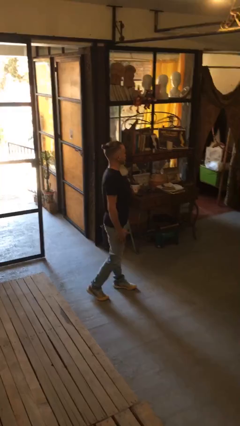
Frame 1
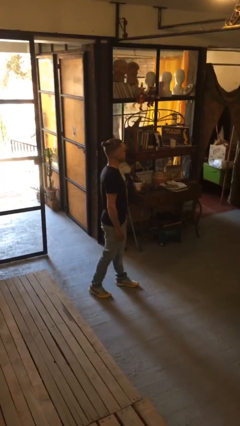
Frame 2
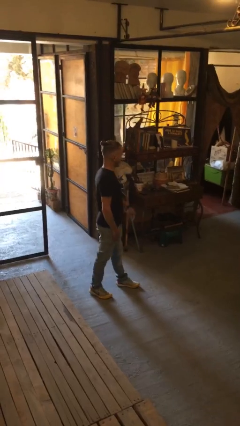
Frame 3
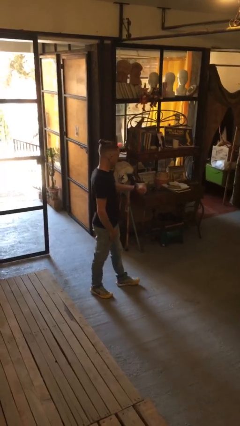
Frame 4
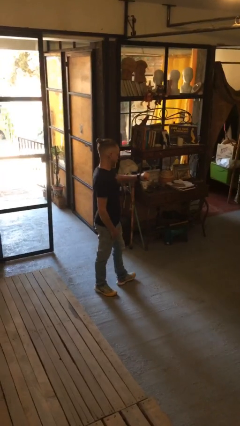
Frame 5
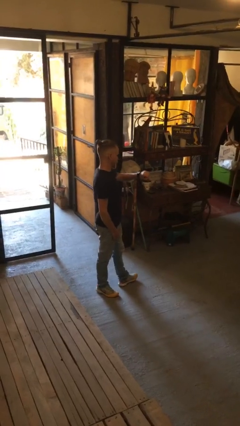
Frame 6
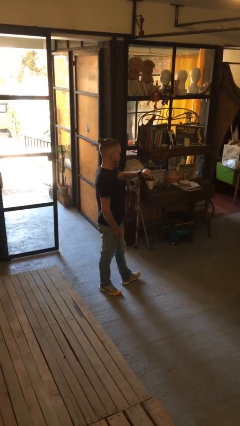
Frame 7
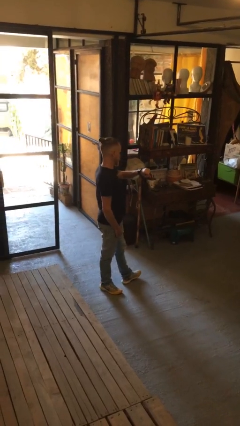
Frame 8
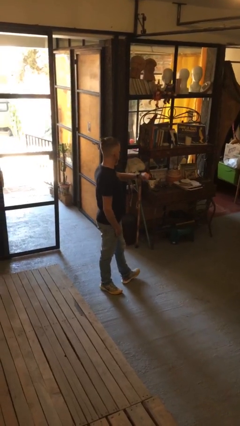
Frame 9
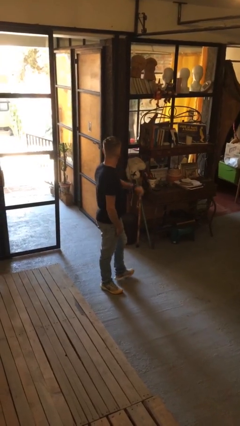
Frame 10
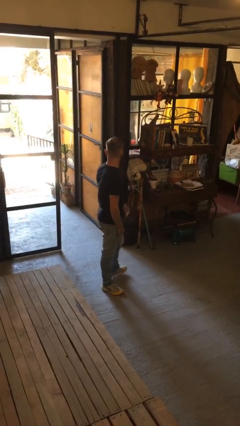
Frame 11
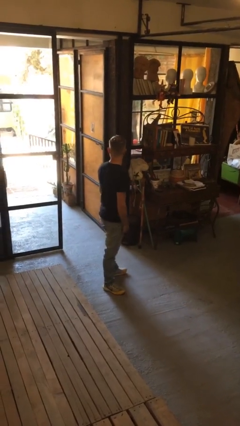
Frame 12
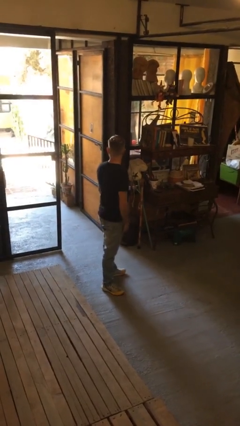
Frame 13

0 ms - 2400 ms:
person looks at wristwatch

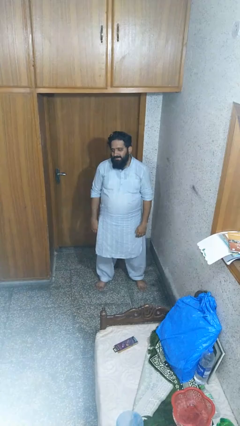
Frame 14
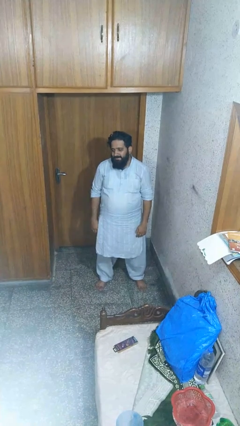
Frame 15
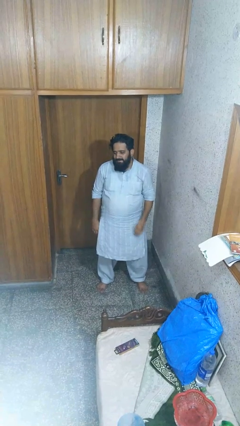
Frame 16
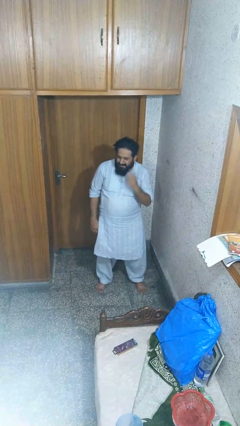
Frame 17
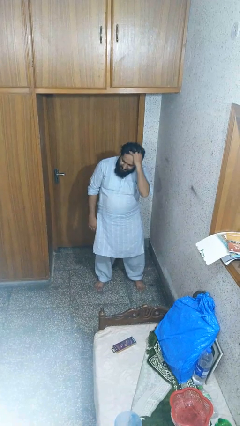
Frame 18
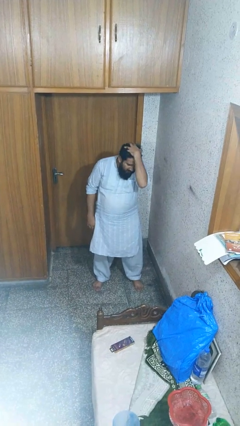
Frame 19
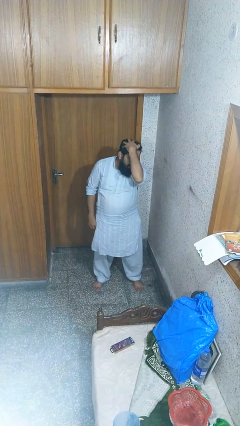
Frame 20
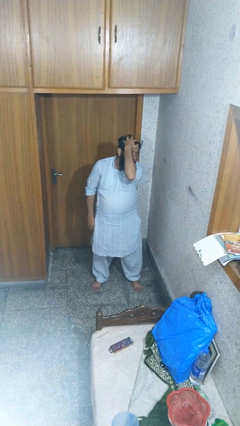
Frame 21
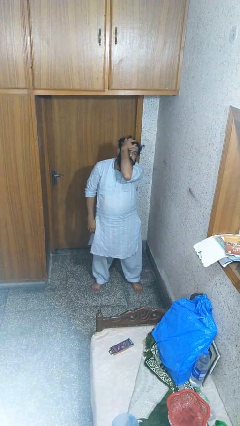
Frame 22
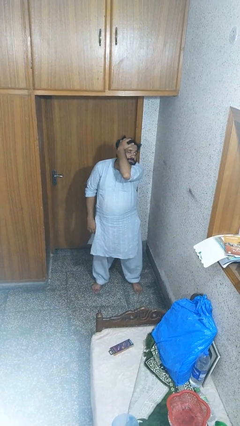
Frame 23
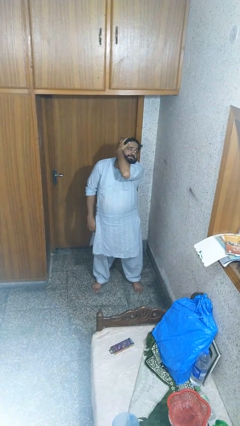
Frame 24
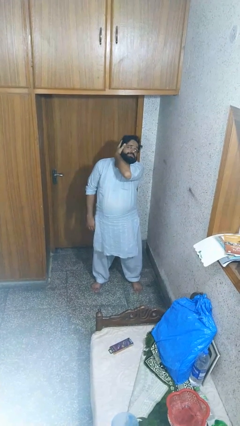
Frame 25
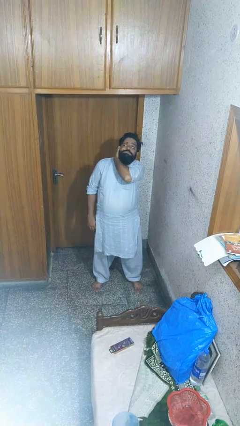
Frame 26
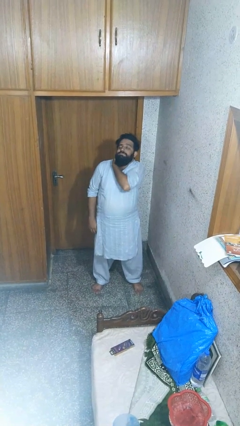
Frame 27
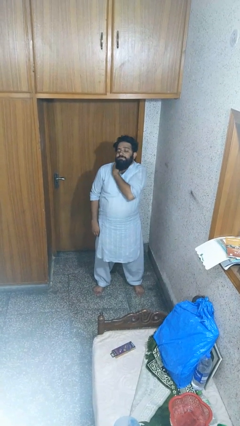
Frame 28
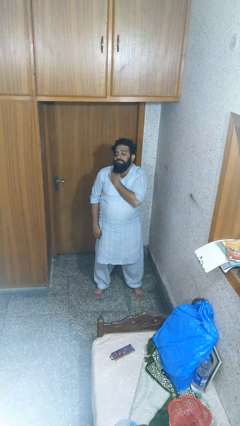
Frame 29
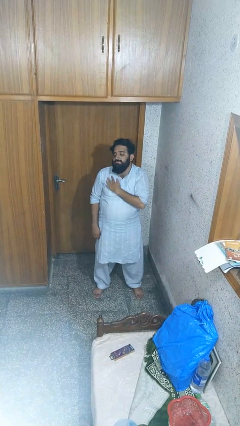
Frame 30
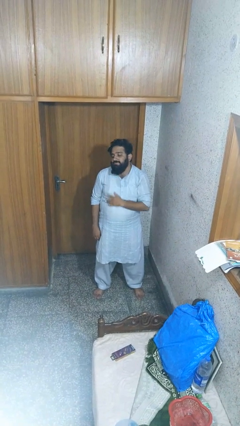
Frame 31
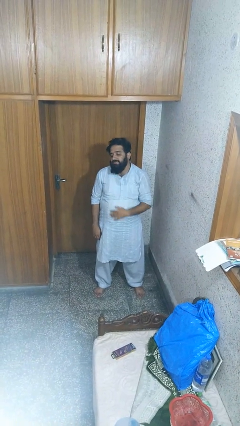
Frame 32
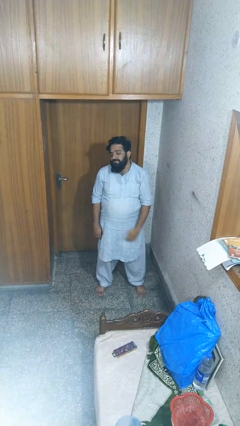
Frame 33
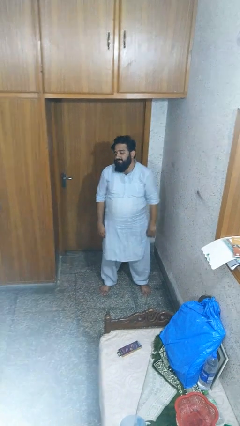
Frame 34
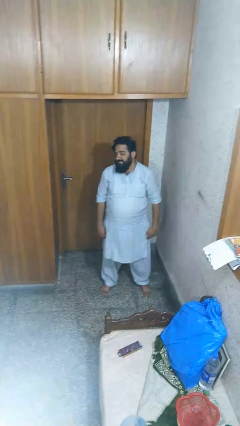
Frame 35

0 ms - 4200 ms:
person scratches face

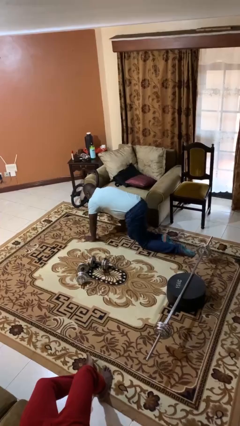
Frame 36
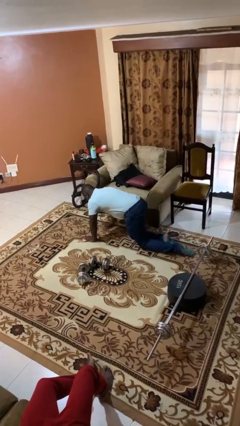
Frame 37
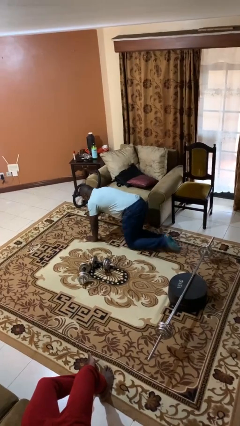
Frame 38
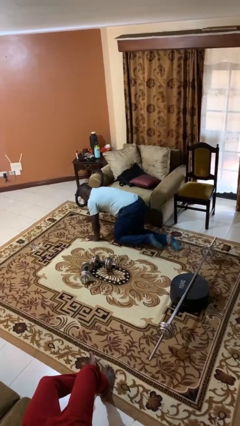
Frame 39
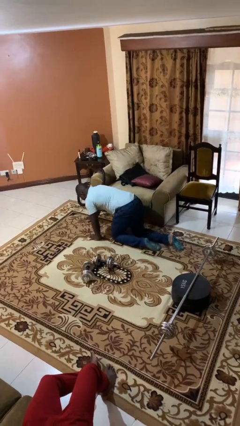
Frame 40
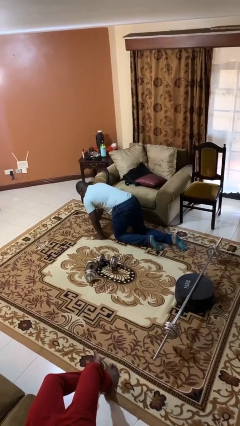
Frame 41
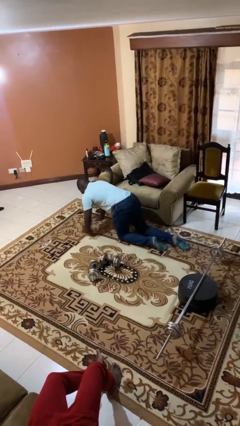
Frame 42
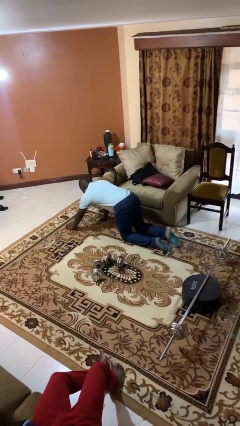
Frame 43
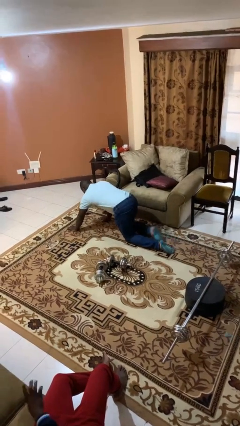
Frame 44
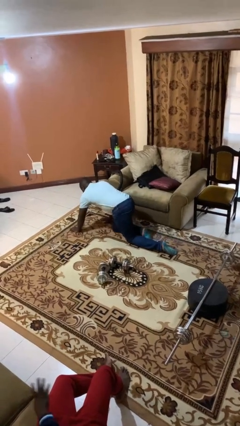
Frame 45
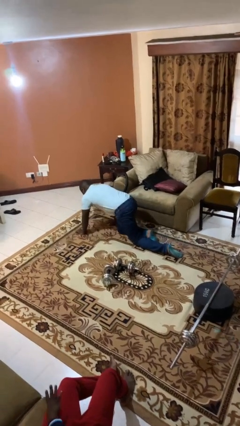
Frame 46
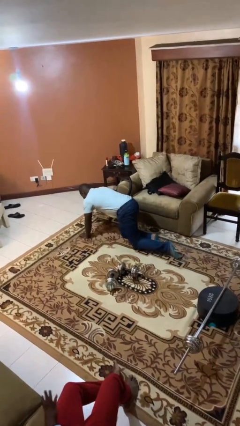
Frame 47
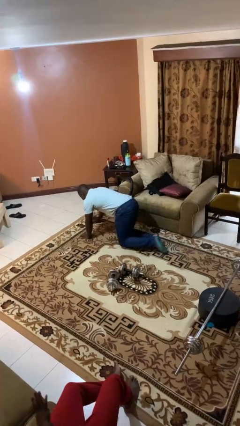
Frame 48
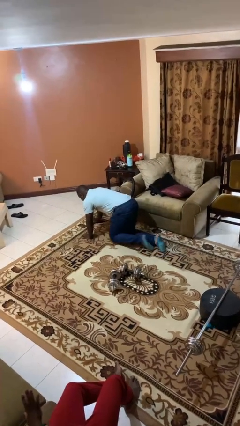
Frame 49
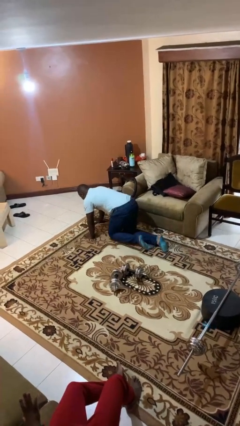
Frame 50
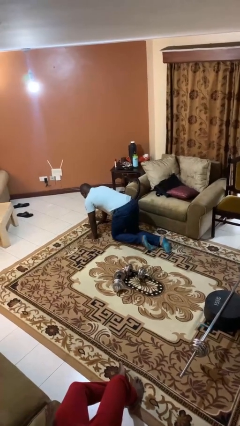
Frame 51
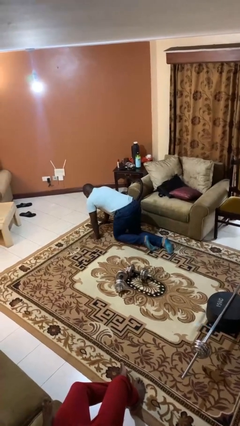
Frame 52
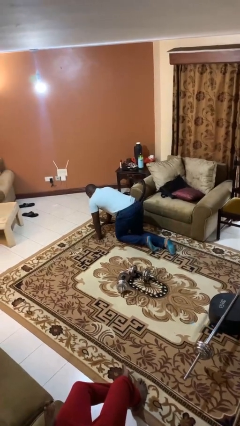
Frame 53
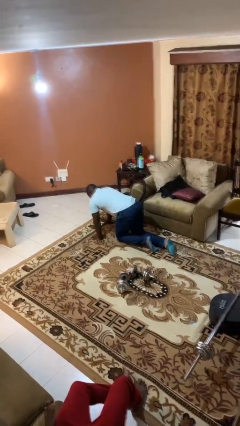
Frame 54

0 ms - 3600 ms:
person crawls

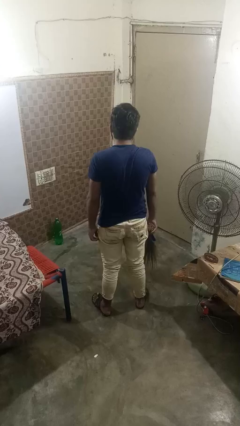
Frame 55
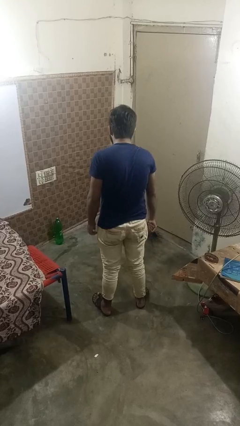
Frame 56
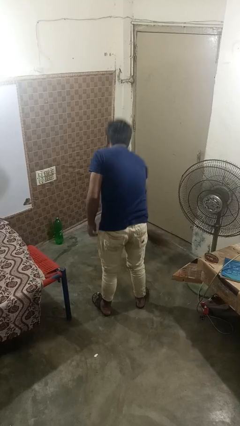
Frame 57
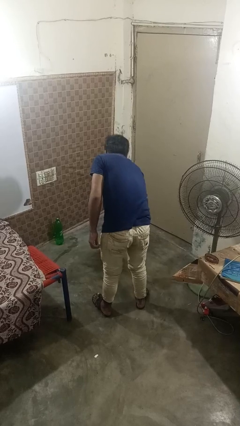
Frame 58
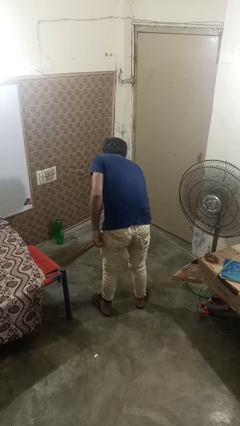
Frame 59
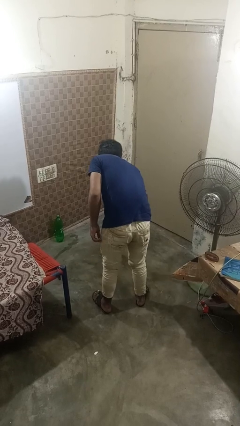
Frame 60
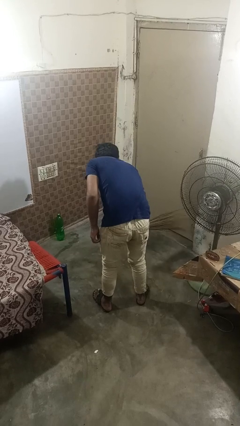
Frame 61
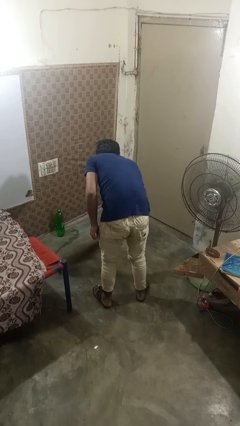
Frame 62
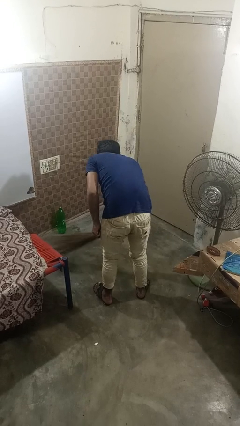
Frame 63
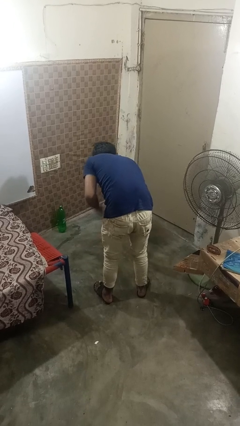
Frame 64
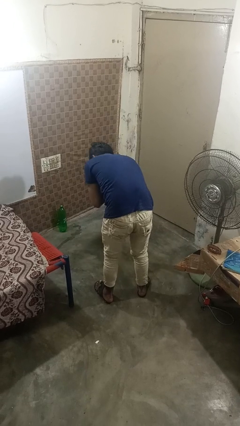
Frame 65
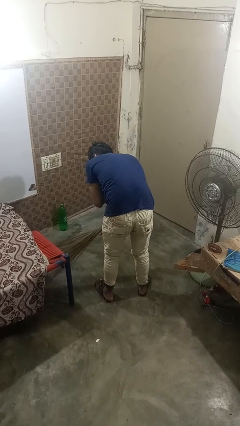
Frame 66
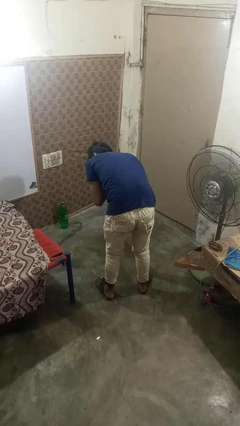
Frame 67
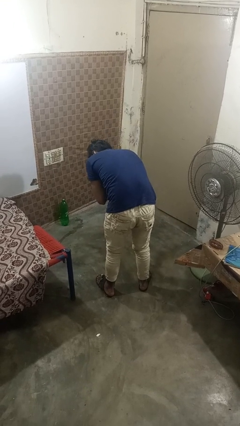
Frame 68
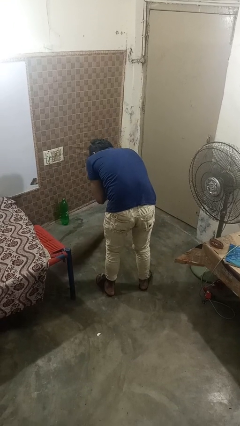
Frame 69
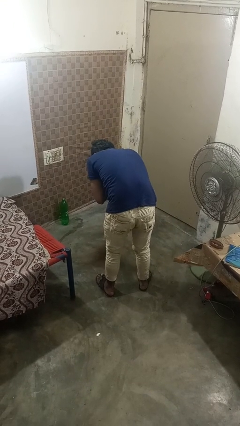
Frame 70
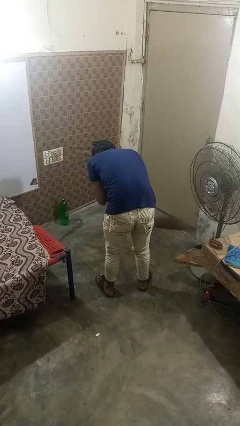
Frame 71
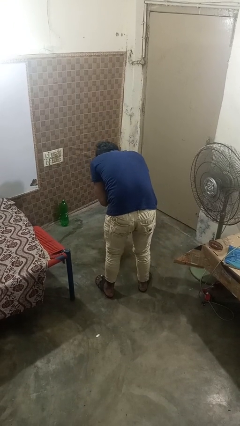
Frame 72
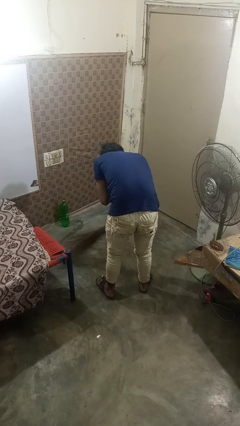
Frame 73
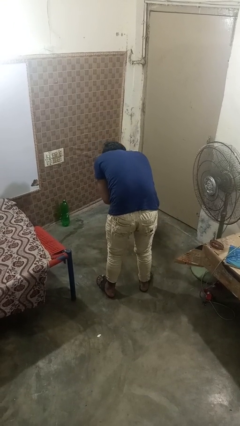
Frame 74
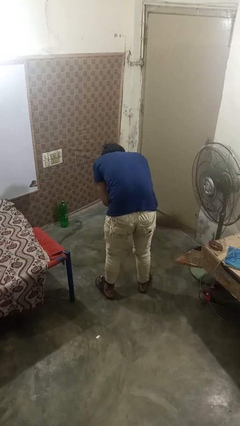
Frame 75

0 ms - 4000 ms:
person sweeps floor

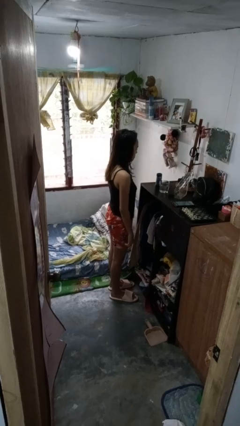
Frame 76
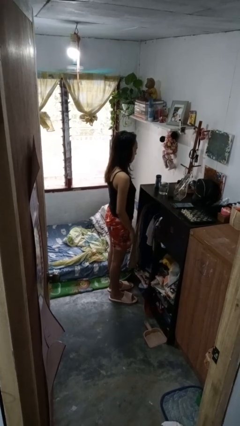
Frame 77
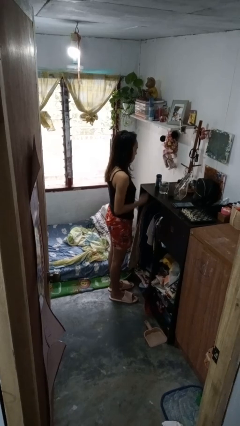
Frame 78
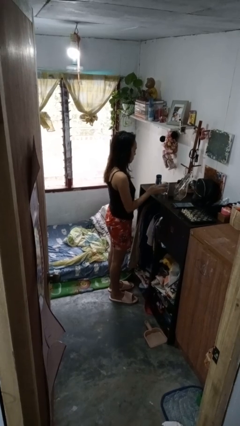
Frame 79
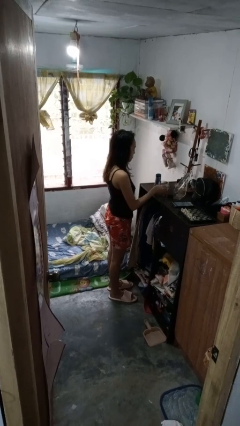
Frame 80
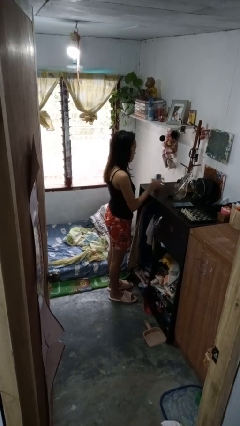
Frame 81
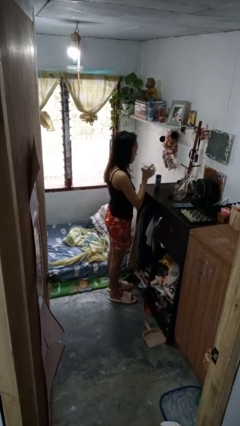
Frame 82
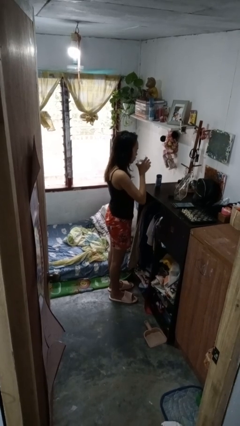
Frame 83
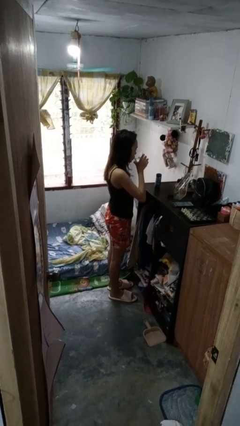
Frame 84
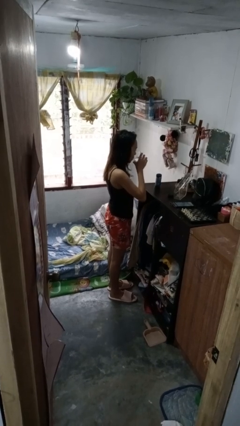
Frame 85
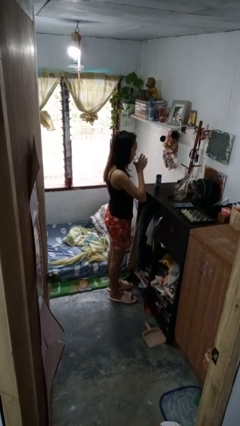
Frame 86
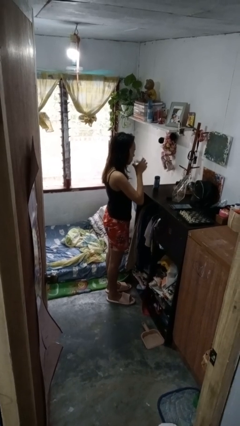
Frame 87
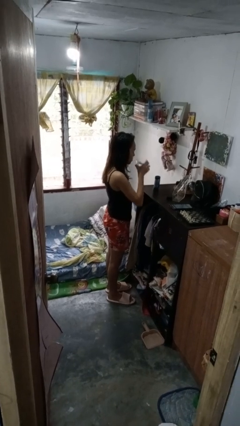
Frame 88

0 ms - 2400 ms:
person drinks from cup

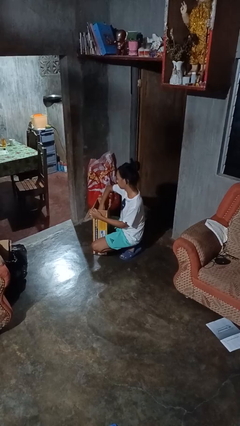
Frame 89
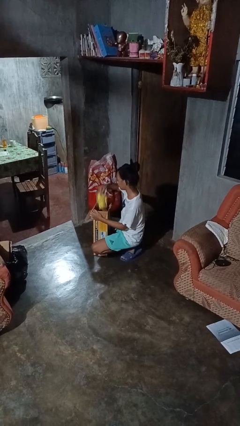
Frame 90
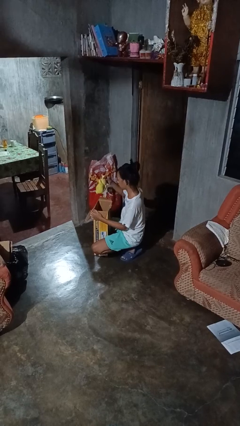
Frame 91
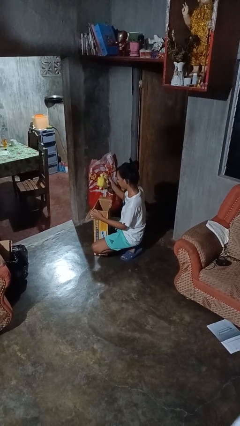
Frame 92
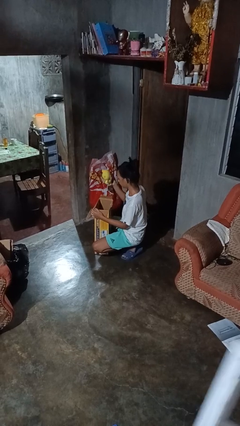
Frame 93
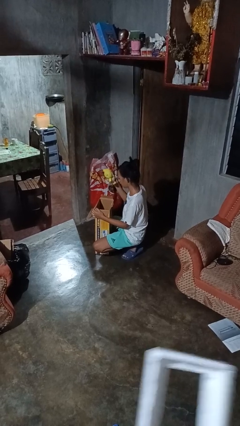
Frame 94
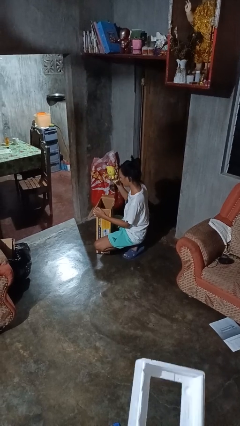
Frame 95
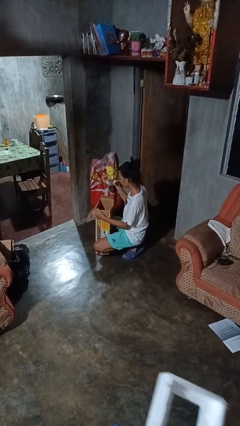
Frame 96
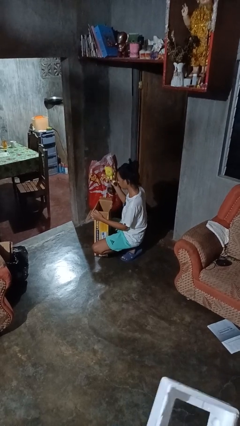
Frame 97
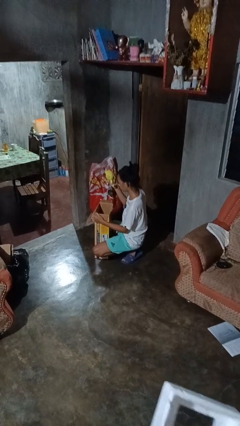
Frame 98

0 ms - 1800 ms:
person takes object from box
